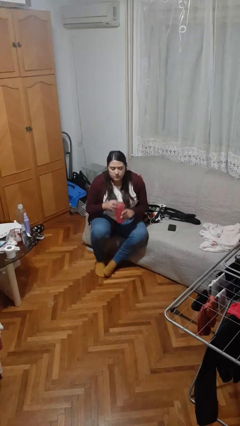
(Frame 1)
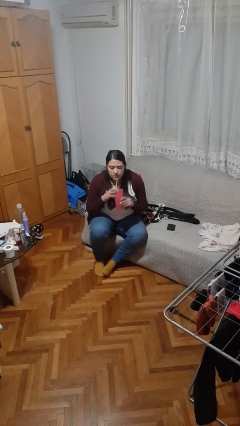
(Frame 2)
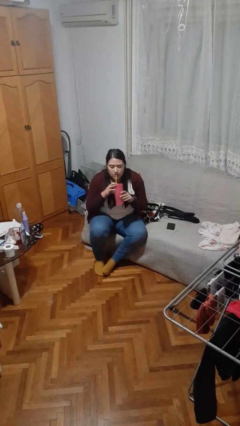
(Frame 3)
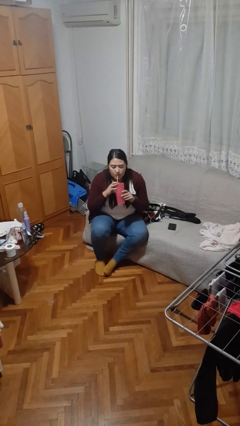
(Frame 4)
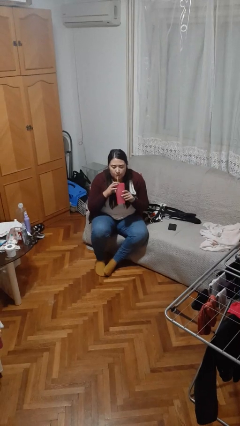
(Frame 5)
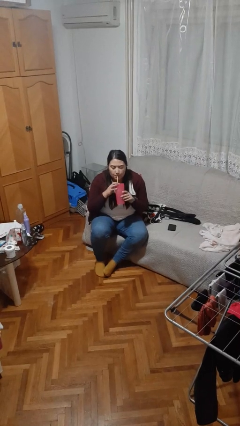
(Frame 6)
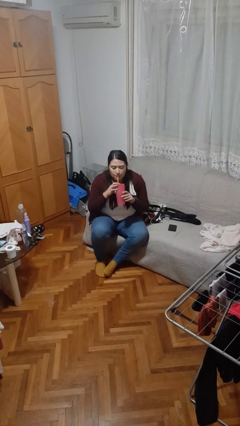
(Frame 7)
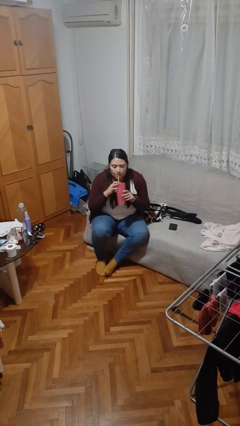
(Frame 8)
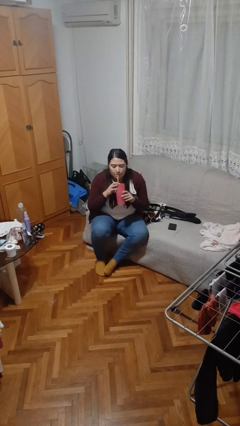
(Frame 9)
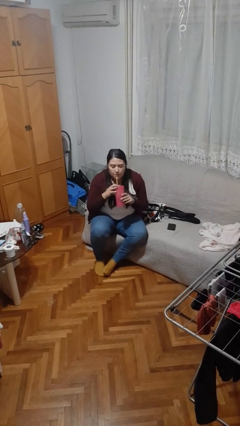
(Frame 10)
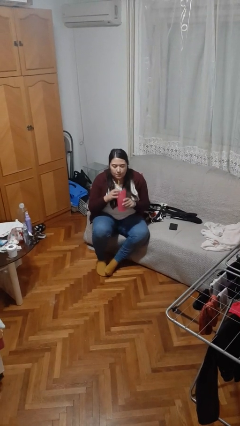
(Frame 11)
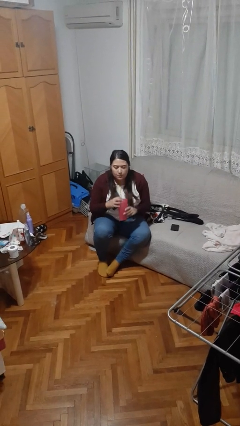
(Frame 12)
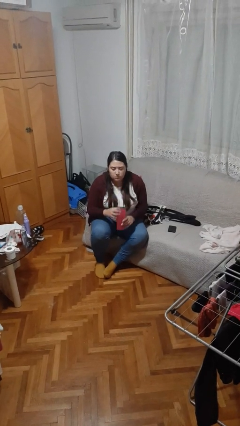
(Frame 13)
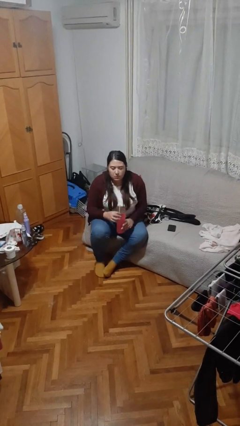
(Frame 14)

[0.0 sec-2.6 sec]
person drinks from straw

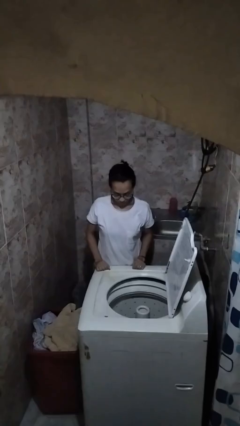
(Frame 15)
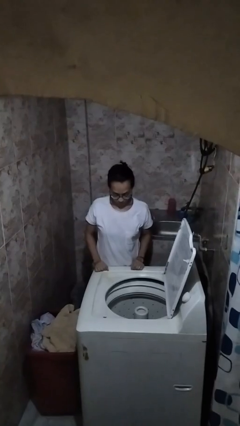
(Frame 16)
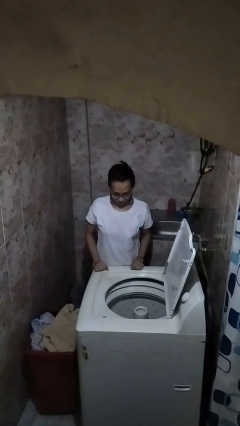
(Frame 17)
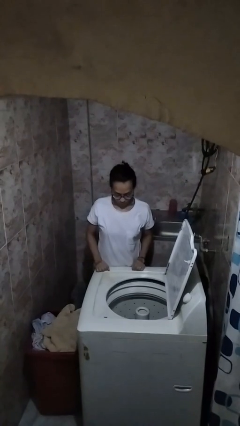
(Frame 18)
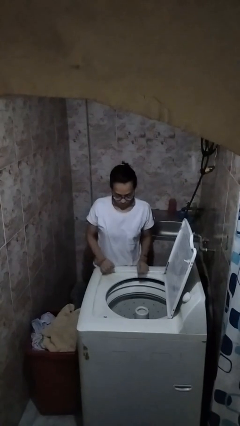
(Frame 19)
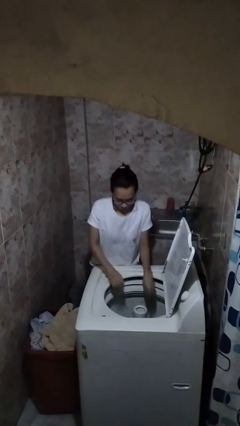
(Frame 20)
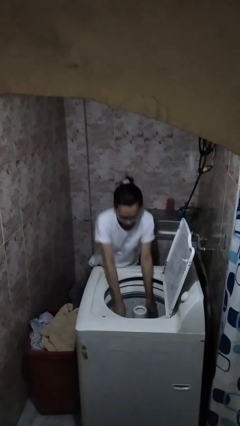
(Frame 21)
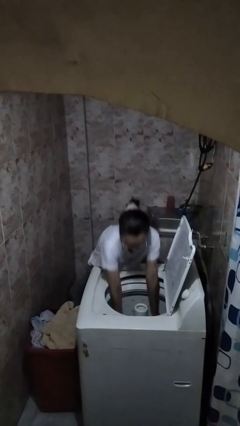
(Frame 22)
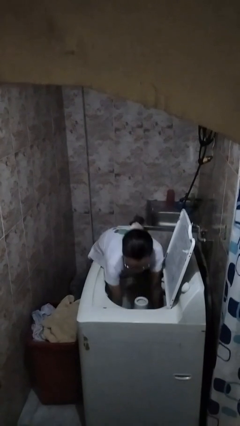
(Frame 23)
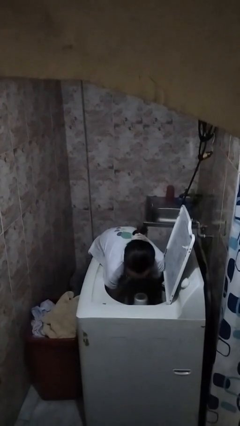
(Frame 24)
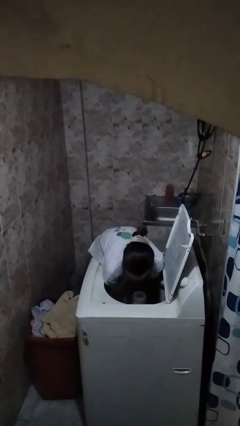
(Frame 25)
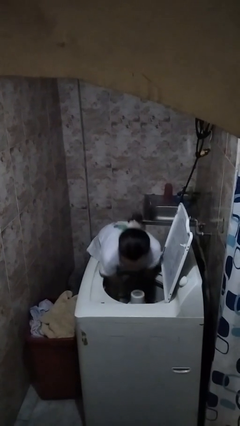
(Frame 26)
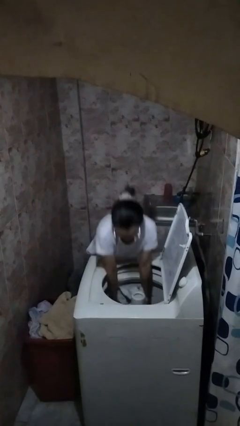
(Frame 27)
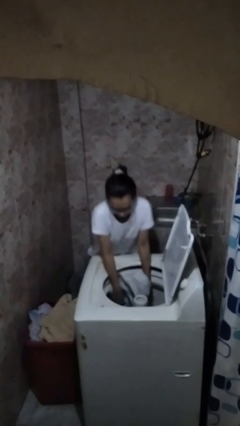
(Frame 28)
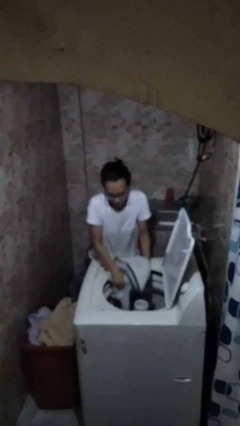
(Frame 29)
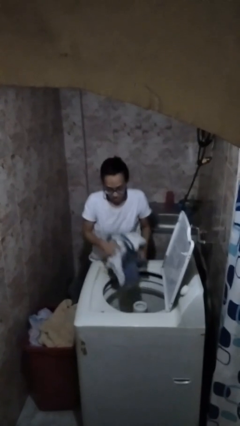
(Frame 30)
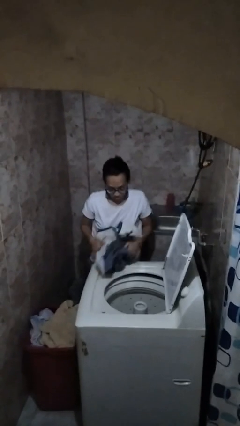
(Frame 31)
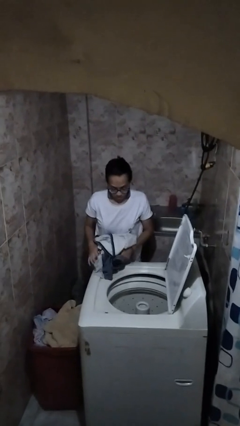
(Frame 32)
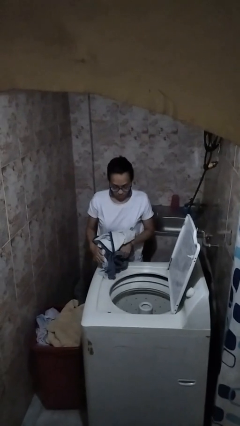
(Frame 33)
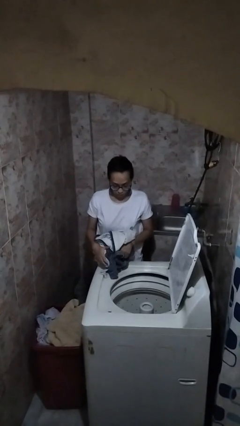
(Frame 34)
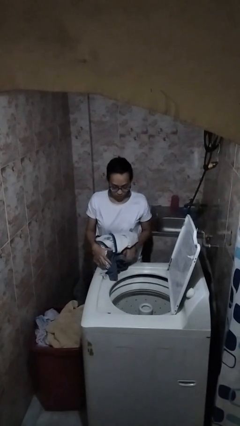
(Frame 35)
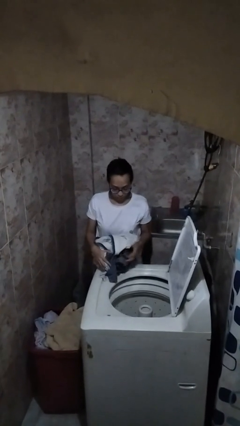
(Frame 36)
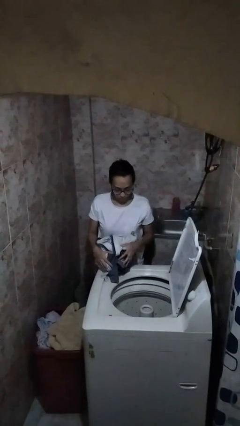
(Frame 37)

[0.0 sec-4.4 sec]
person loads clotheswasher

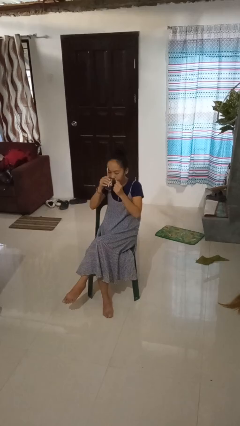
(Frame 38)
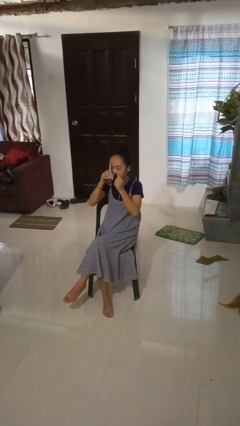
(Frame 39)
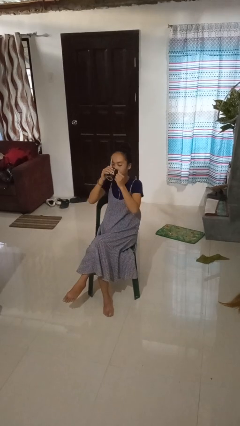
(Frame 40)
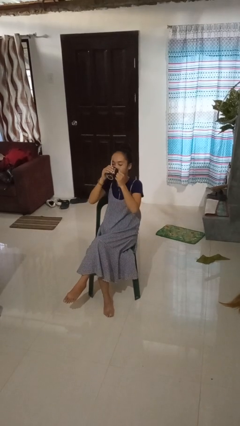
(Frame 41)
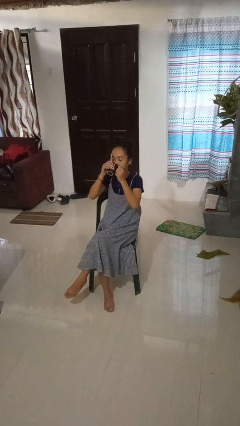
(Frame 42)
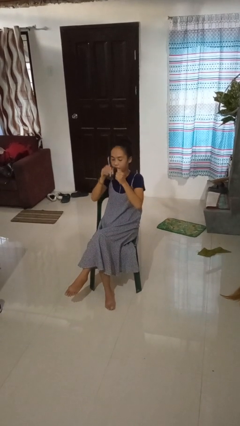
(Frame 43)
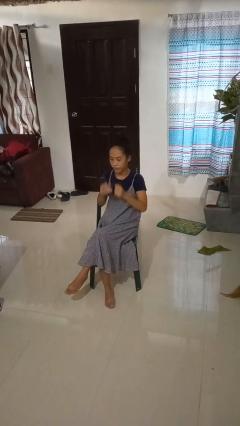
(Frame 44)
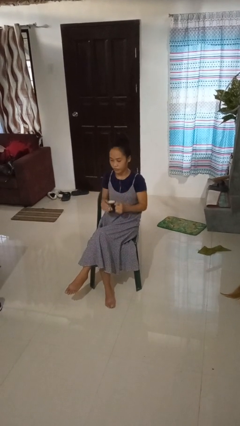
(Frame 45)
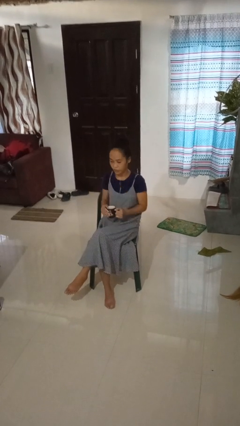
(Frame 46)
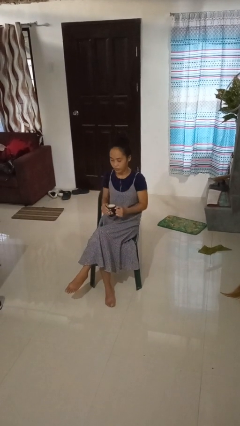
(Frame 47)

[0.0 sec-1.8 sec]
person drinks from mug

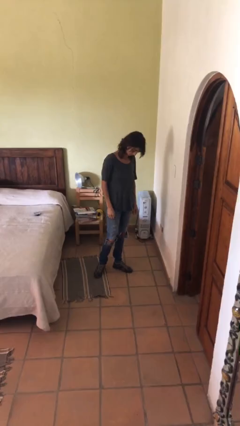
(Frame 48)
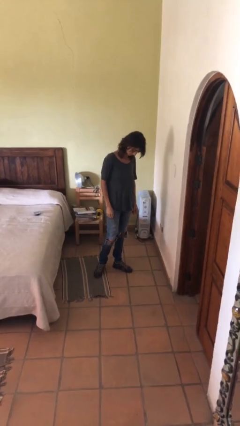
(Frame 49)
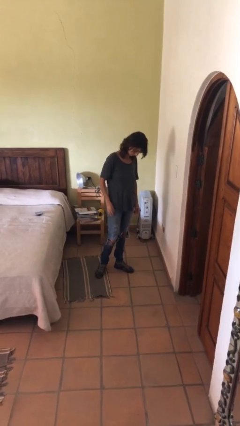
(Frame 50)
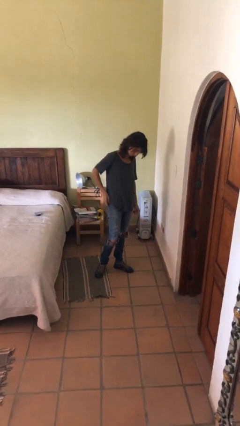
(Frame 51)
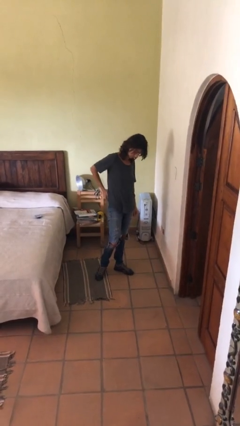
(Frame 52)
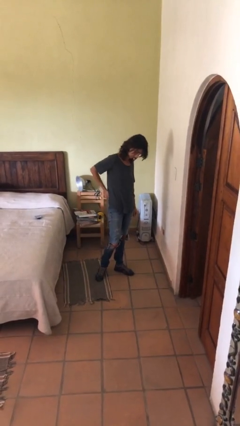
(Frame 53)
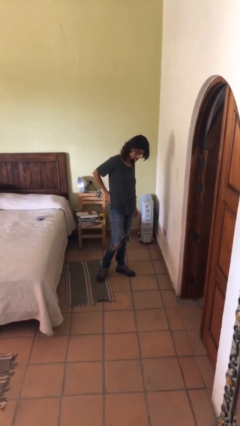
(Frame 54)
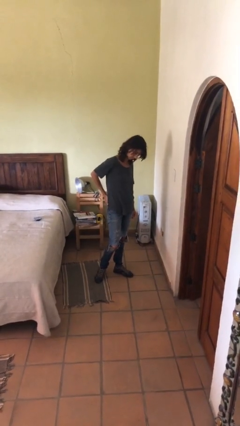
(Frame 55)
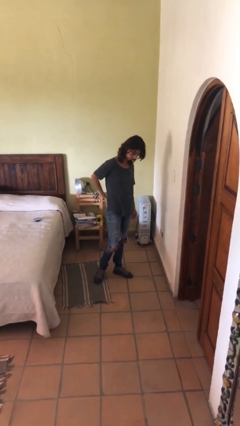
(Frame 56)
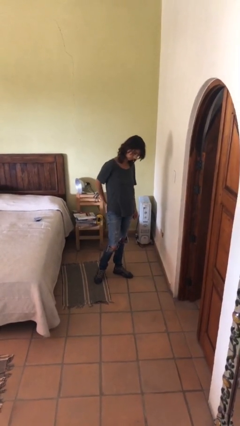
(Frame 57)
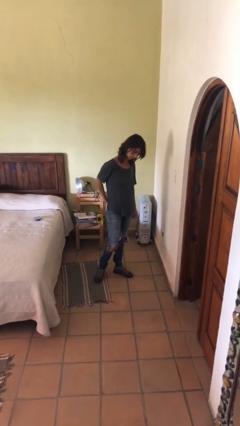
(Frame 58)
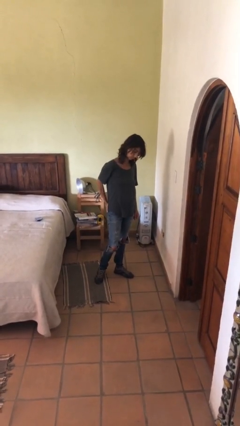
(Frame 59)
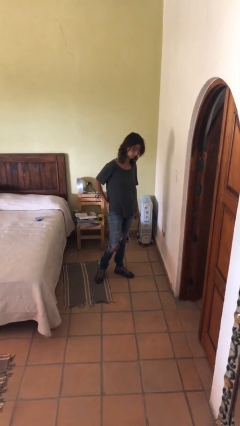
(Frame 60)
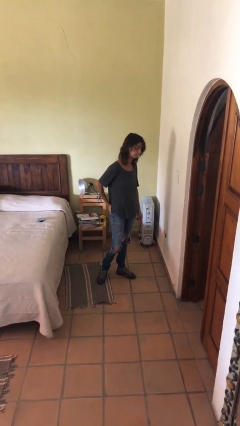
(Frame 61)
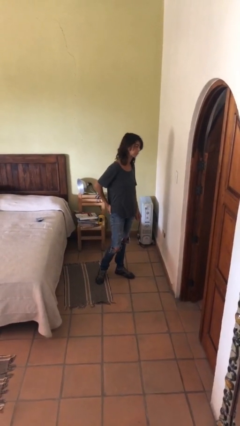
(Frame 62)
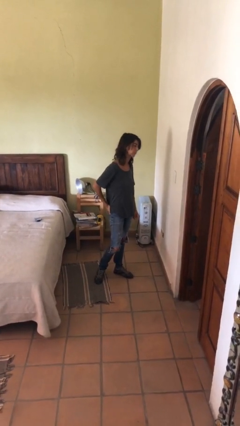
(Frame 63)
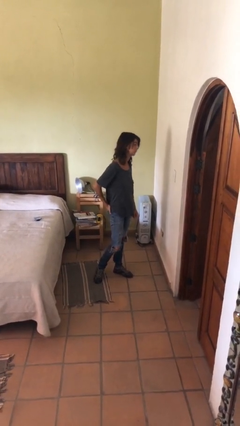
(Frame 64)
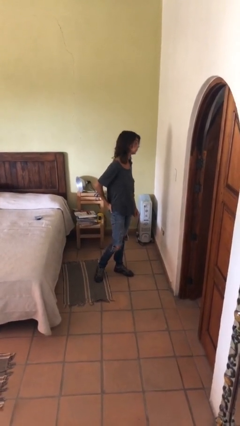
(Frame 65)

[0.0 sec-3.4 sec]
person puts hands in back pockets

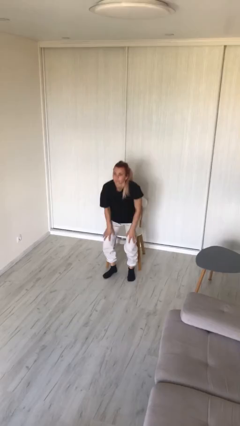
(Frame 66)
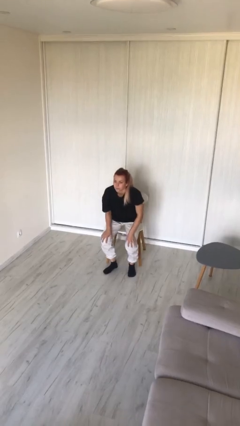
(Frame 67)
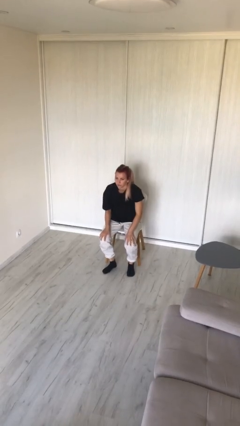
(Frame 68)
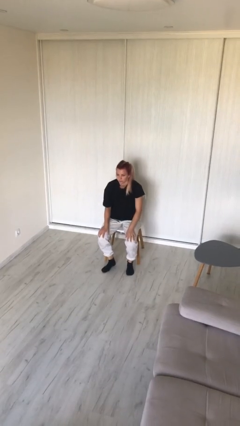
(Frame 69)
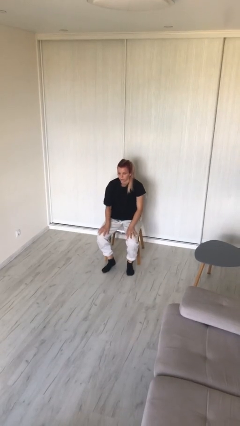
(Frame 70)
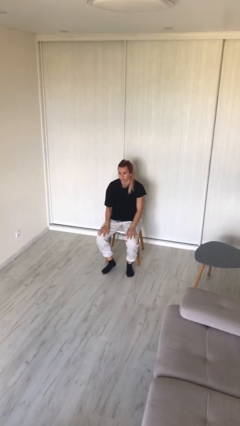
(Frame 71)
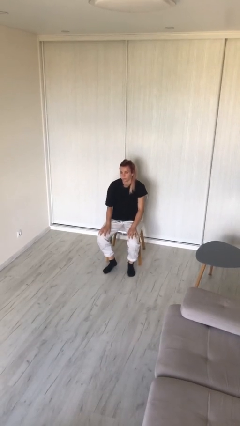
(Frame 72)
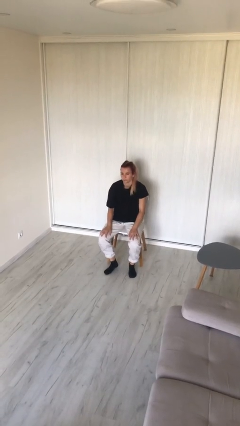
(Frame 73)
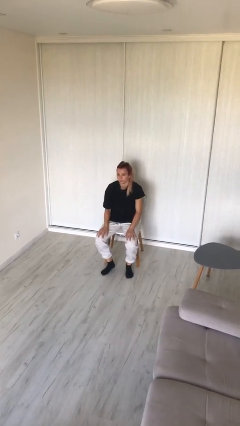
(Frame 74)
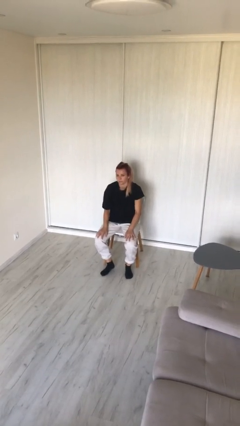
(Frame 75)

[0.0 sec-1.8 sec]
person sits down

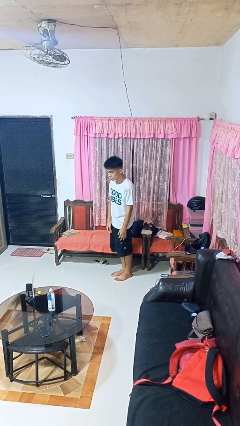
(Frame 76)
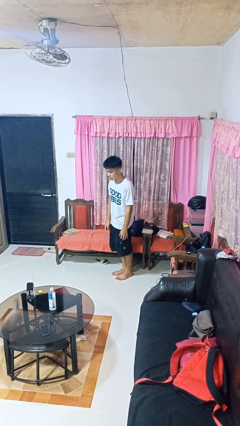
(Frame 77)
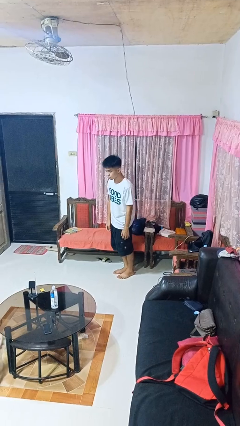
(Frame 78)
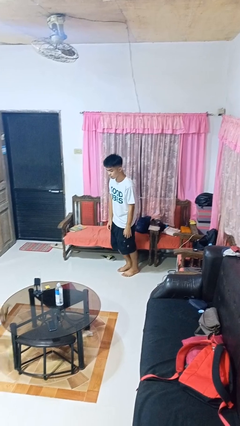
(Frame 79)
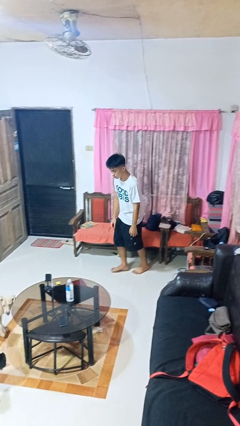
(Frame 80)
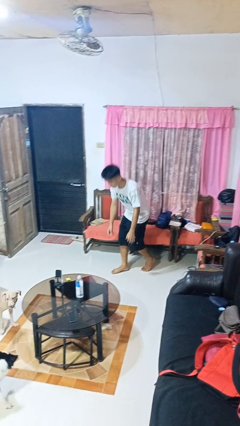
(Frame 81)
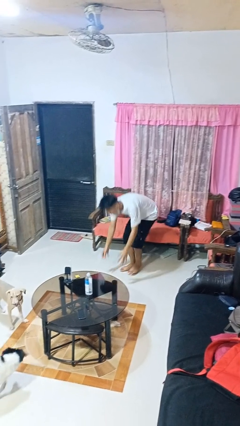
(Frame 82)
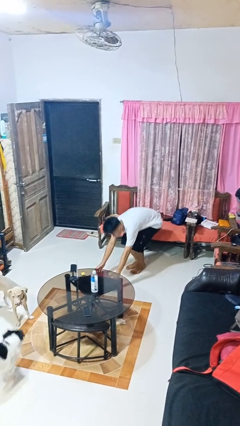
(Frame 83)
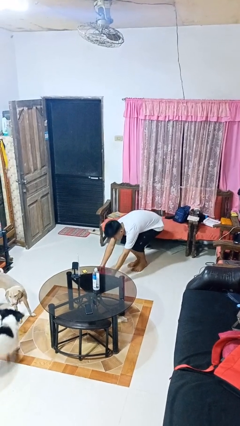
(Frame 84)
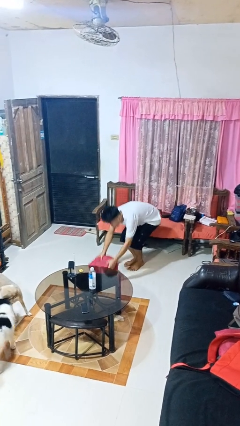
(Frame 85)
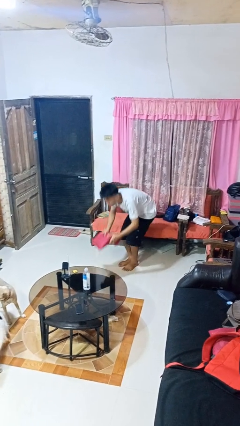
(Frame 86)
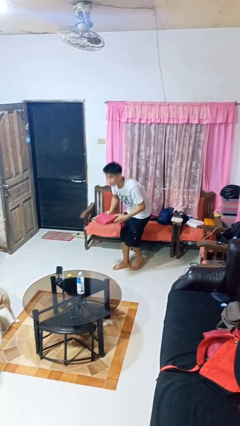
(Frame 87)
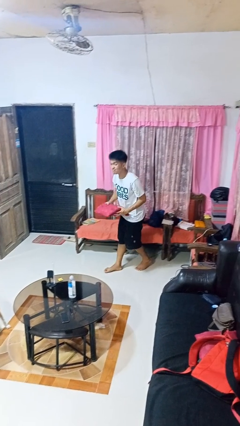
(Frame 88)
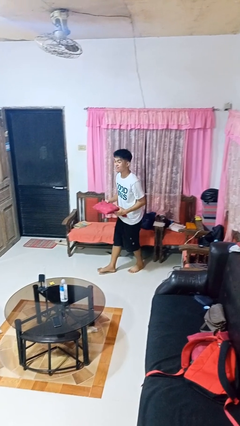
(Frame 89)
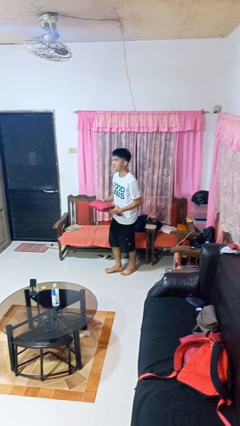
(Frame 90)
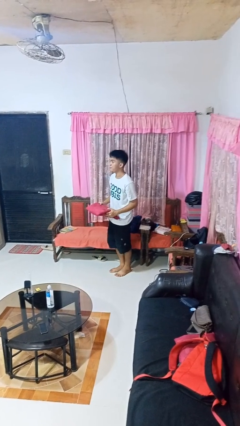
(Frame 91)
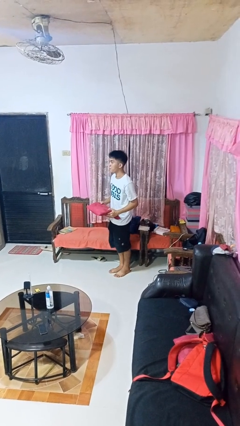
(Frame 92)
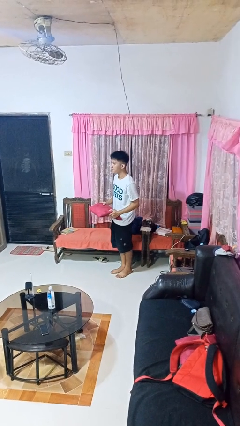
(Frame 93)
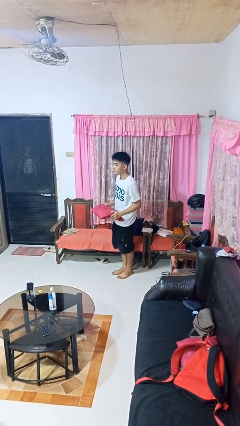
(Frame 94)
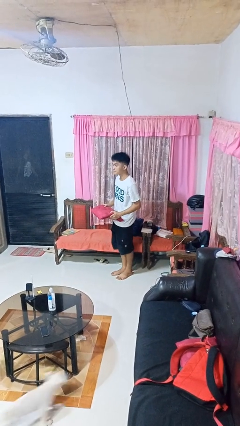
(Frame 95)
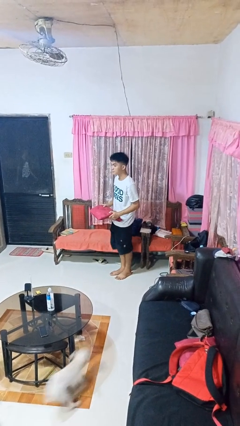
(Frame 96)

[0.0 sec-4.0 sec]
person picks up object from floor
